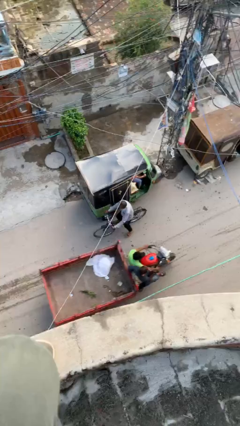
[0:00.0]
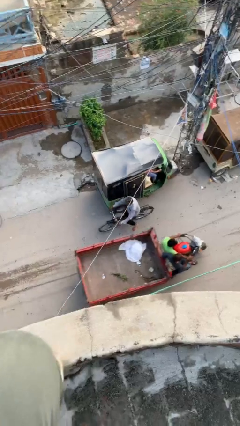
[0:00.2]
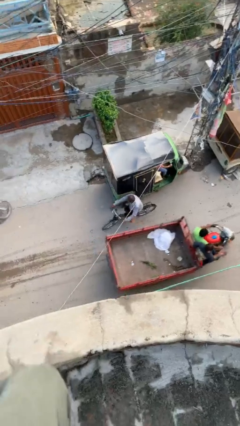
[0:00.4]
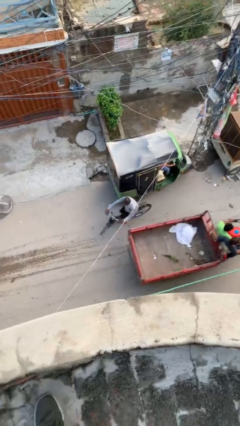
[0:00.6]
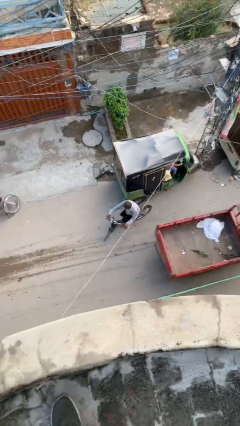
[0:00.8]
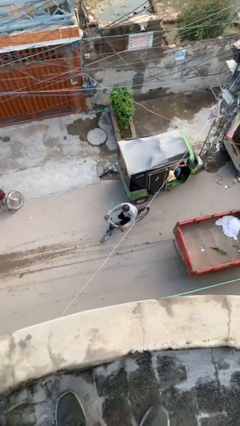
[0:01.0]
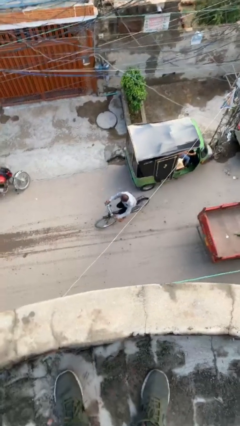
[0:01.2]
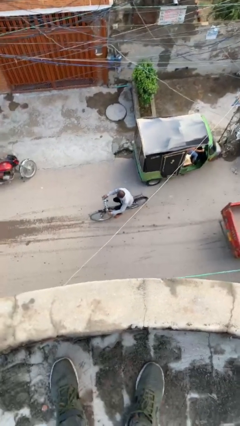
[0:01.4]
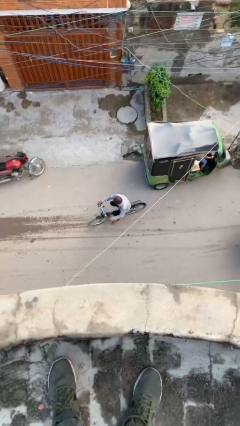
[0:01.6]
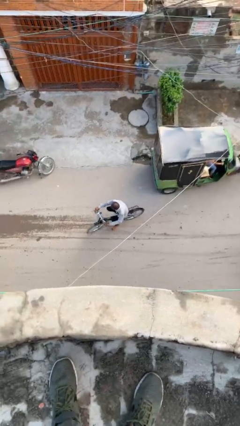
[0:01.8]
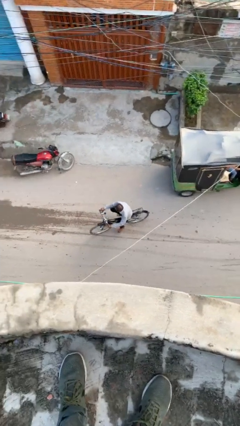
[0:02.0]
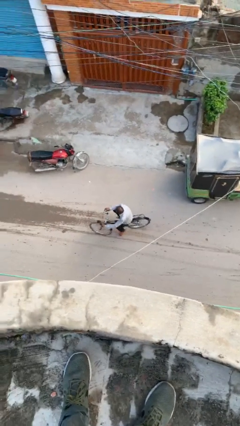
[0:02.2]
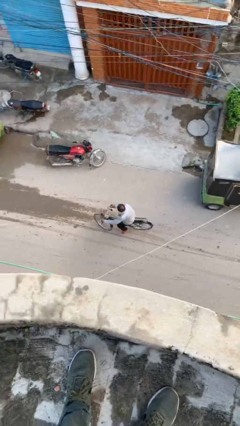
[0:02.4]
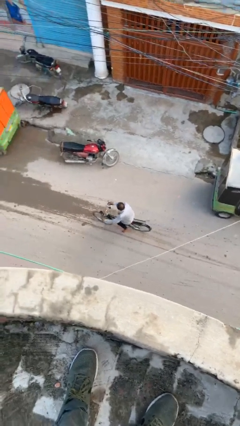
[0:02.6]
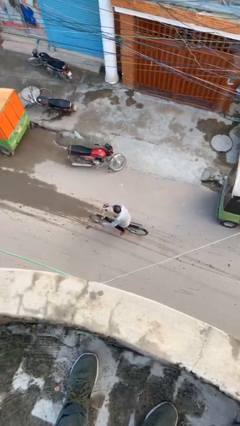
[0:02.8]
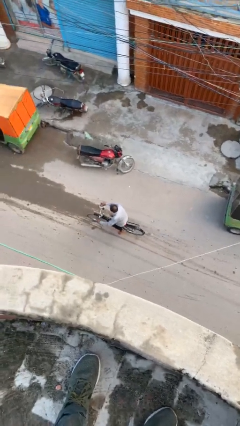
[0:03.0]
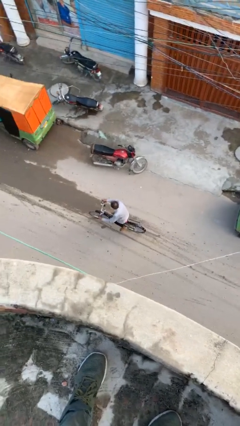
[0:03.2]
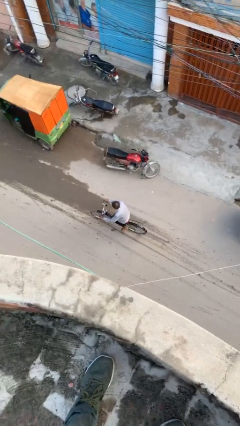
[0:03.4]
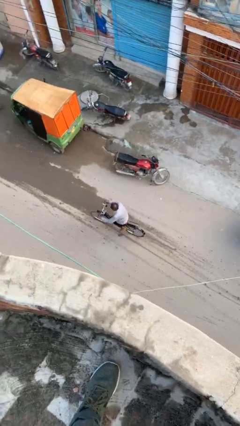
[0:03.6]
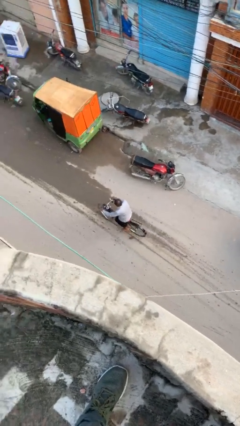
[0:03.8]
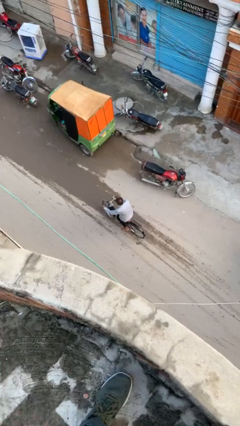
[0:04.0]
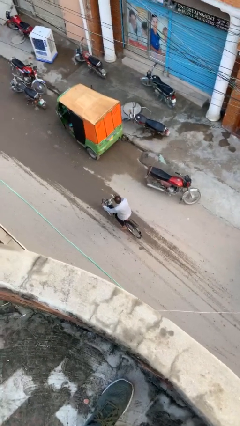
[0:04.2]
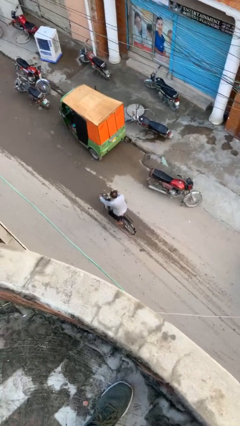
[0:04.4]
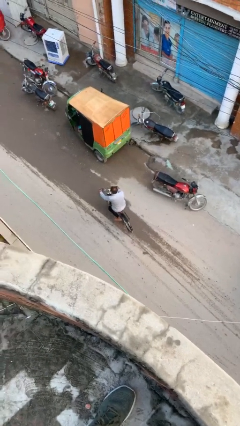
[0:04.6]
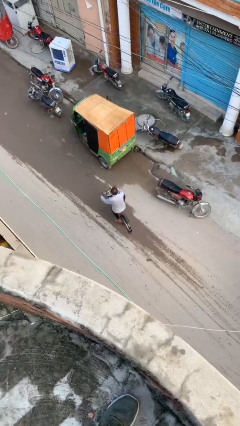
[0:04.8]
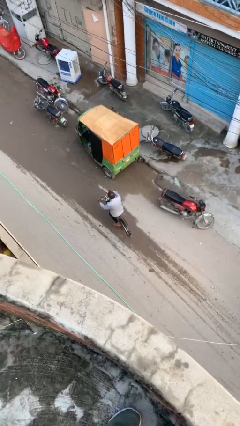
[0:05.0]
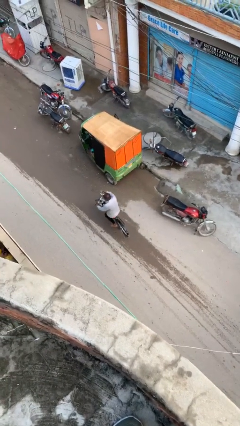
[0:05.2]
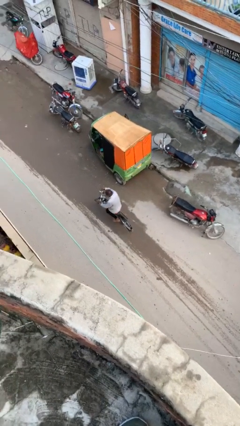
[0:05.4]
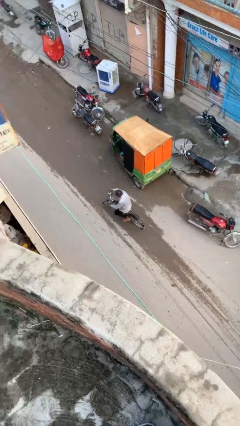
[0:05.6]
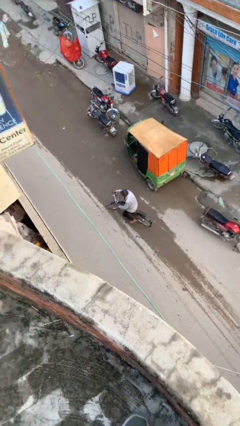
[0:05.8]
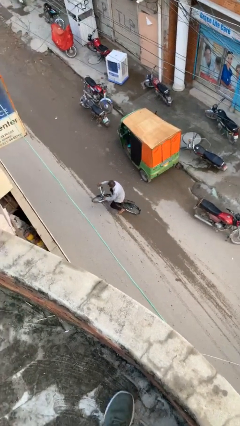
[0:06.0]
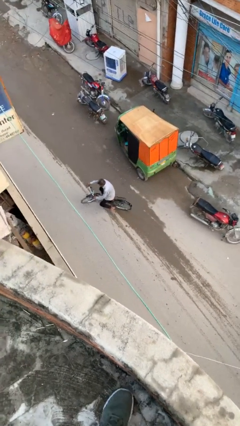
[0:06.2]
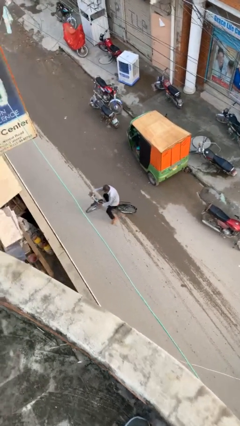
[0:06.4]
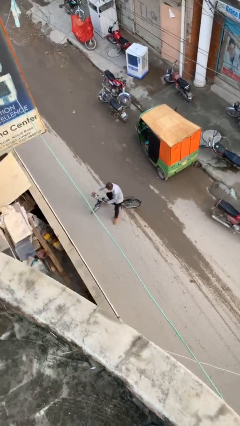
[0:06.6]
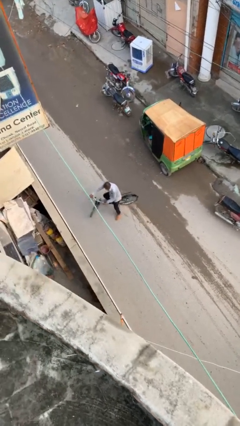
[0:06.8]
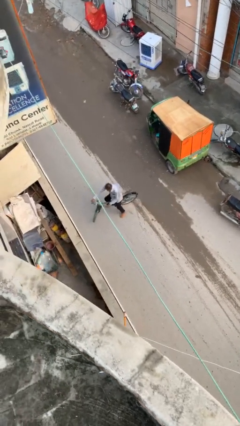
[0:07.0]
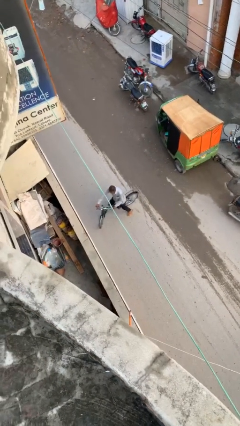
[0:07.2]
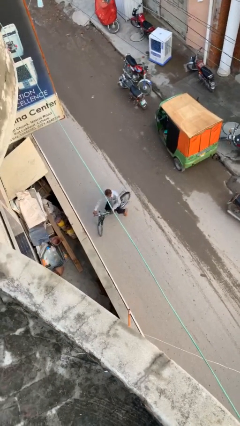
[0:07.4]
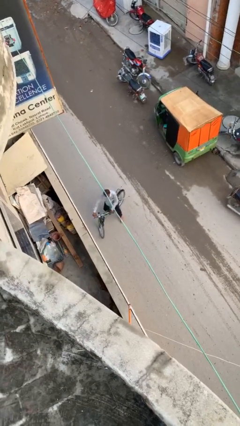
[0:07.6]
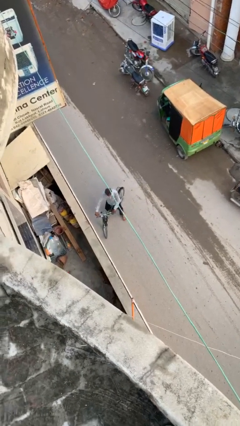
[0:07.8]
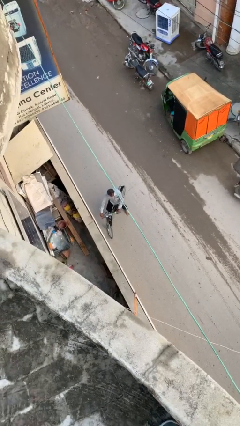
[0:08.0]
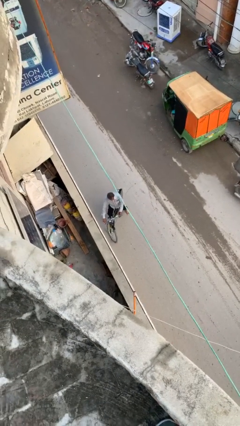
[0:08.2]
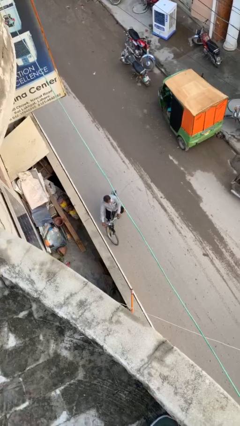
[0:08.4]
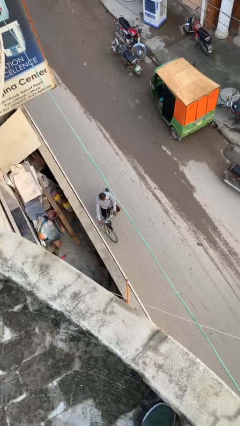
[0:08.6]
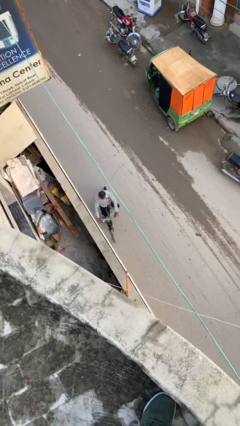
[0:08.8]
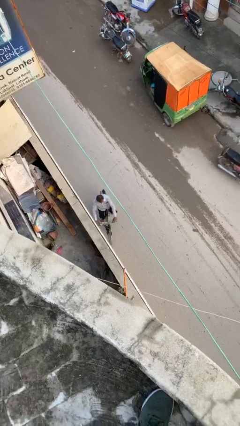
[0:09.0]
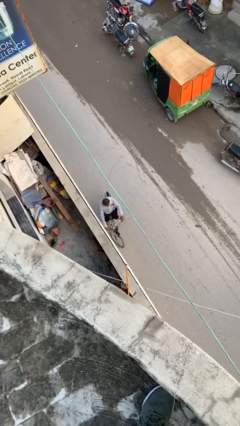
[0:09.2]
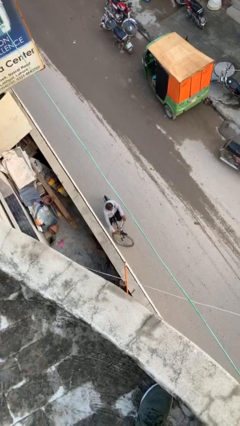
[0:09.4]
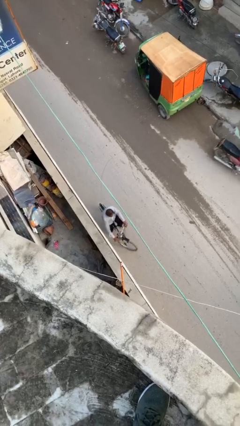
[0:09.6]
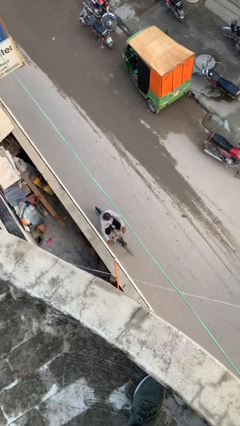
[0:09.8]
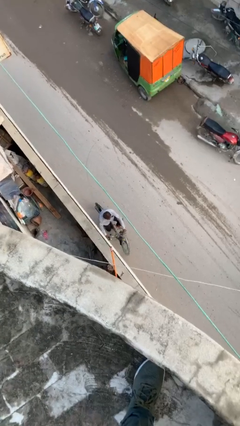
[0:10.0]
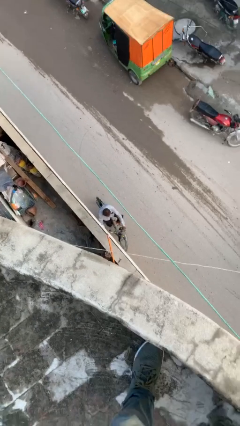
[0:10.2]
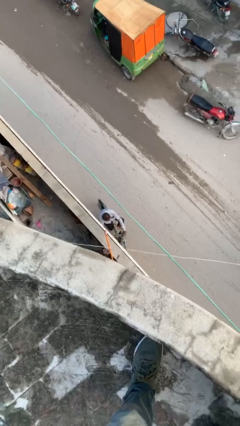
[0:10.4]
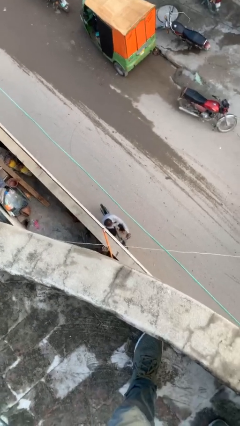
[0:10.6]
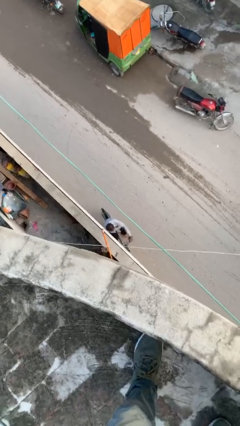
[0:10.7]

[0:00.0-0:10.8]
person rides bicycle

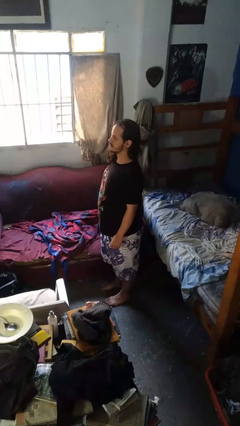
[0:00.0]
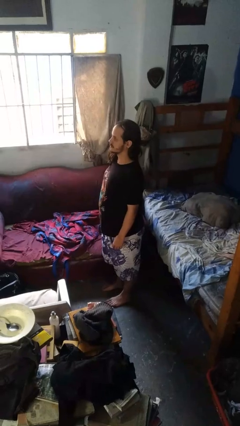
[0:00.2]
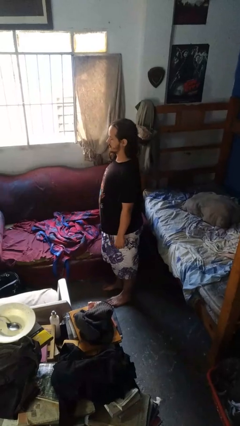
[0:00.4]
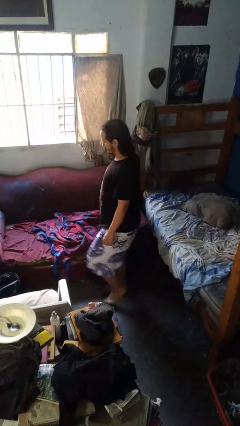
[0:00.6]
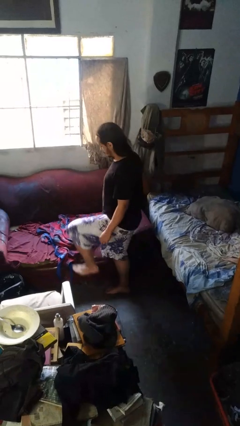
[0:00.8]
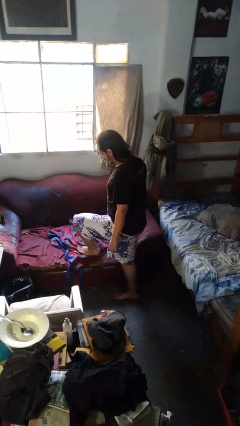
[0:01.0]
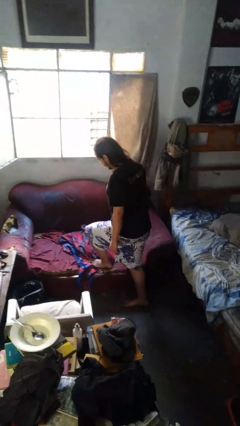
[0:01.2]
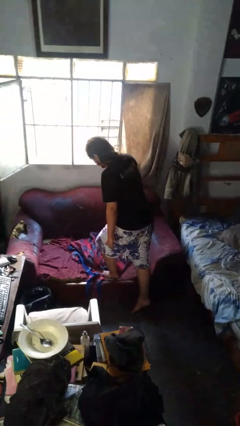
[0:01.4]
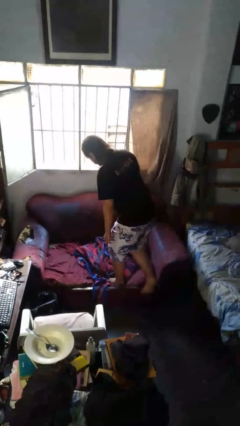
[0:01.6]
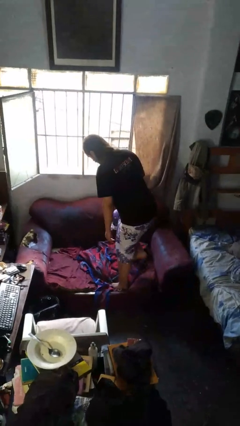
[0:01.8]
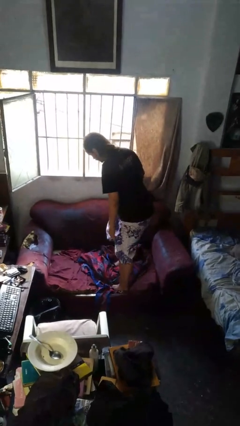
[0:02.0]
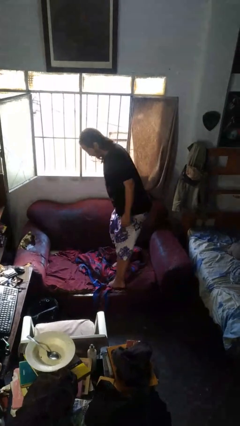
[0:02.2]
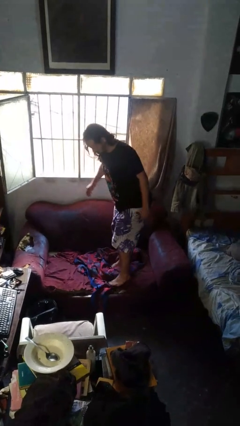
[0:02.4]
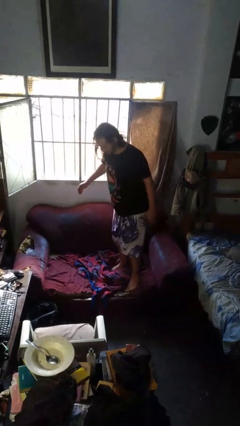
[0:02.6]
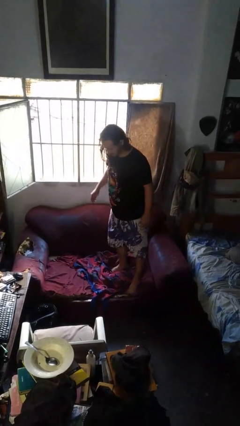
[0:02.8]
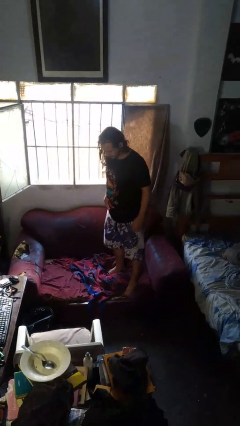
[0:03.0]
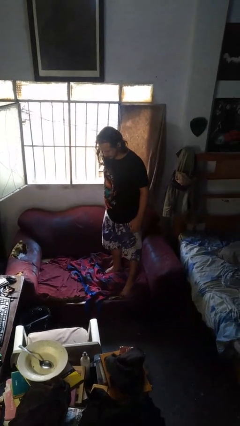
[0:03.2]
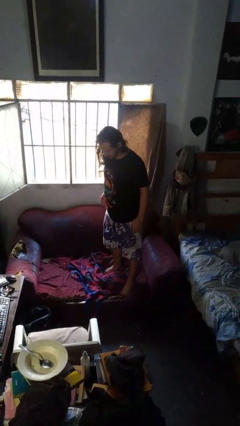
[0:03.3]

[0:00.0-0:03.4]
person climbs on couch

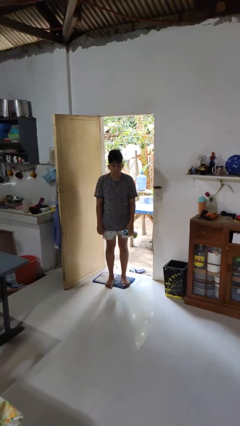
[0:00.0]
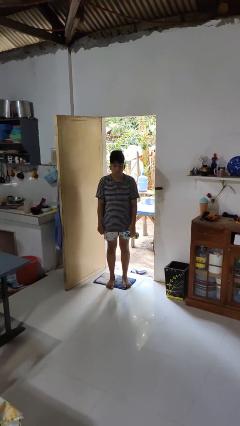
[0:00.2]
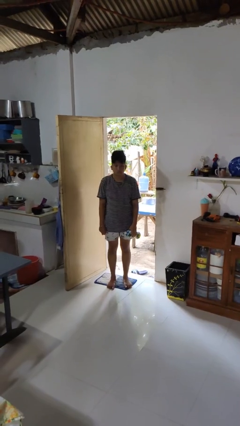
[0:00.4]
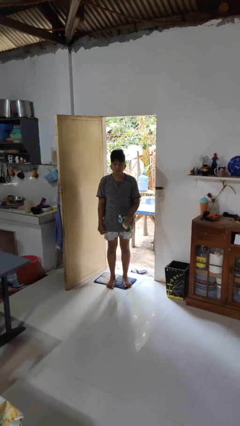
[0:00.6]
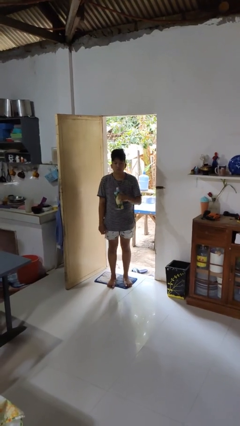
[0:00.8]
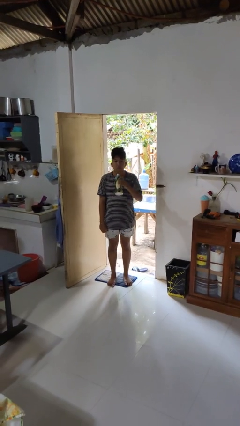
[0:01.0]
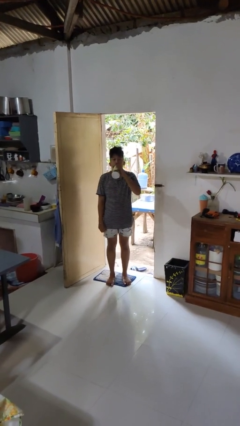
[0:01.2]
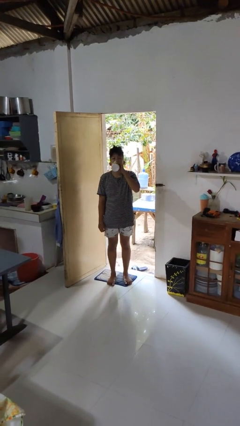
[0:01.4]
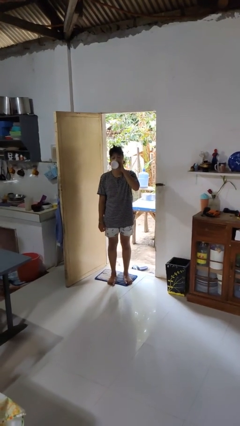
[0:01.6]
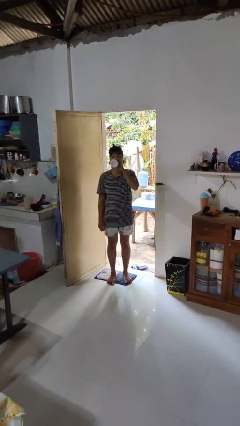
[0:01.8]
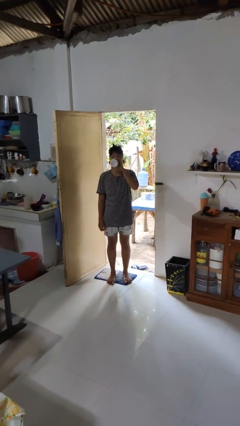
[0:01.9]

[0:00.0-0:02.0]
person drinks from bottle

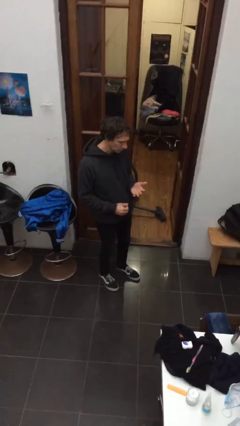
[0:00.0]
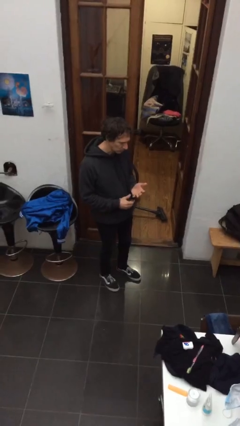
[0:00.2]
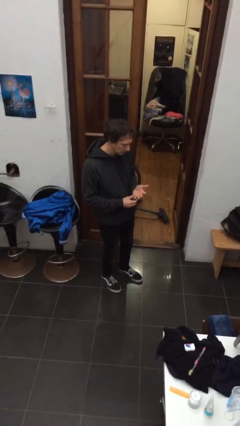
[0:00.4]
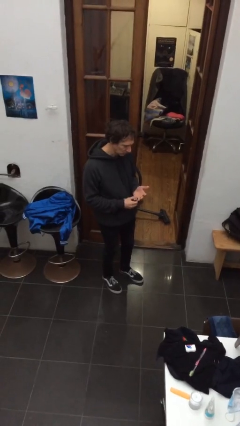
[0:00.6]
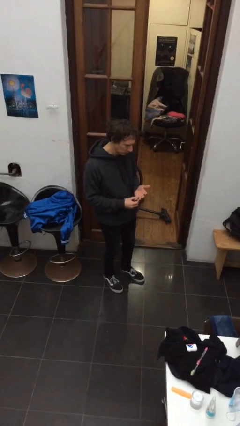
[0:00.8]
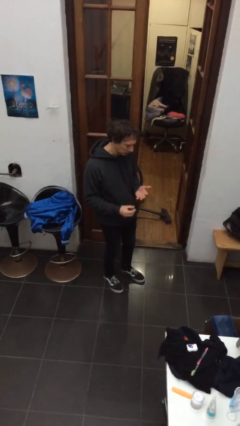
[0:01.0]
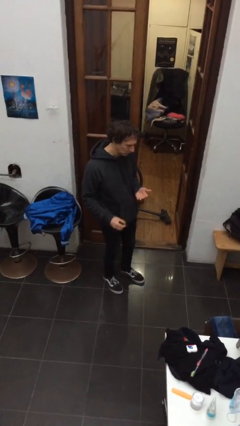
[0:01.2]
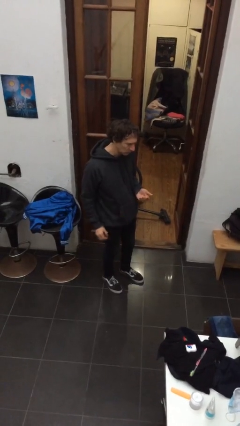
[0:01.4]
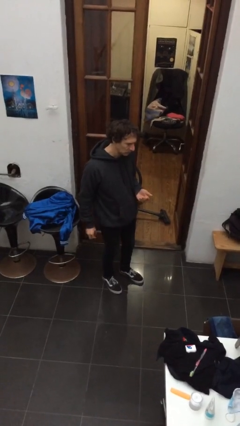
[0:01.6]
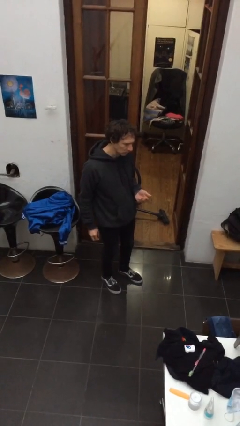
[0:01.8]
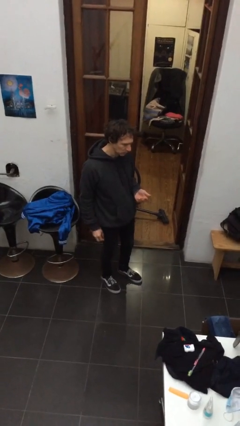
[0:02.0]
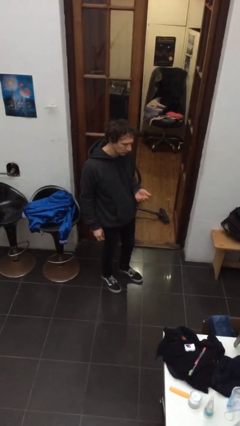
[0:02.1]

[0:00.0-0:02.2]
person takes off ring
